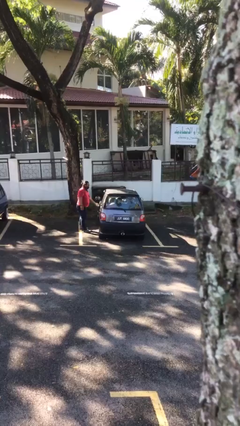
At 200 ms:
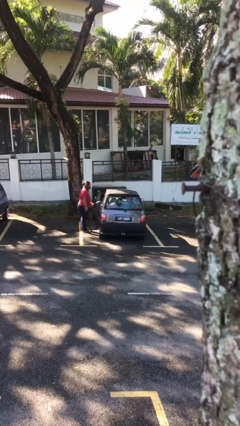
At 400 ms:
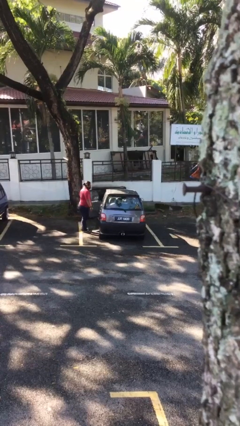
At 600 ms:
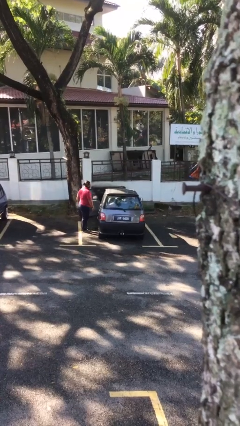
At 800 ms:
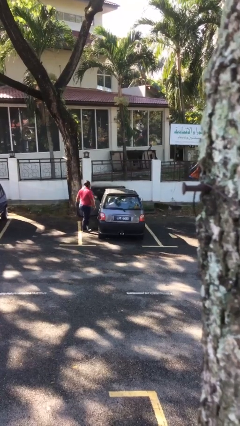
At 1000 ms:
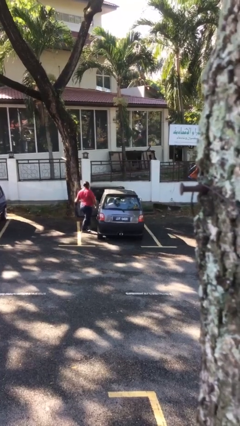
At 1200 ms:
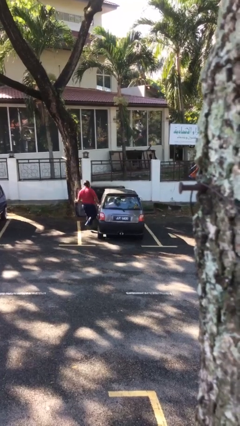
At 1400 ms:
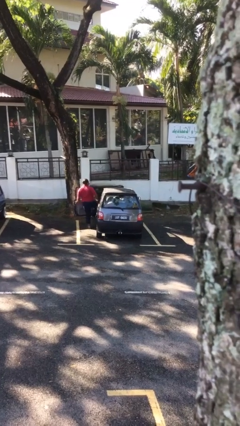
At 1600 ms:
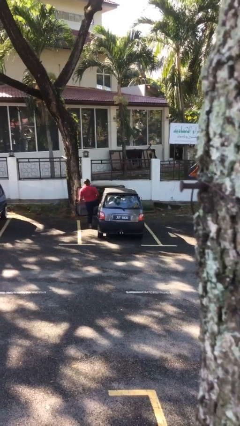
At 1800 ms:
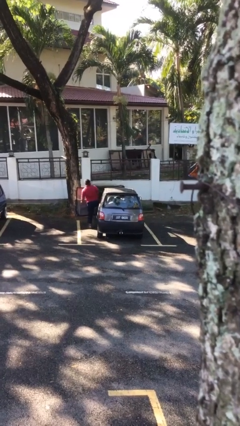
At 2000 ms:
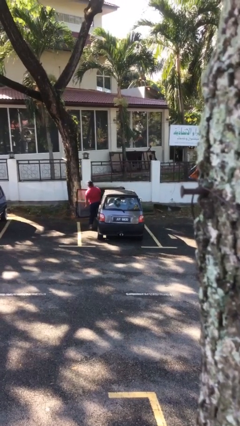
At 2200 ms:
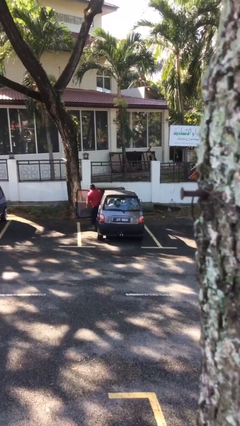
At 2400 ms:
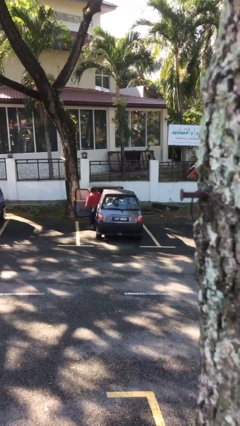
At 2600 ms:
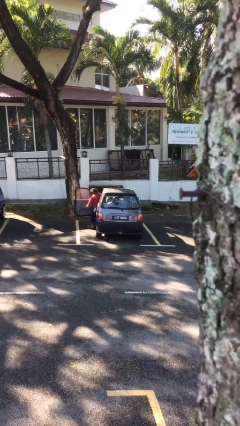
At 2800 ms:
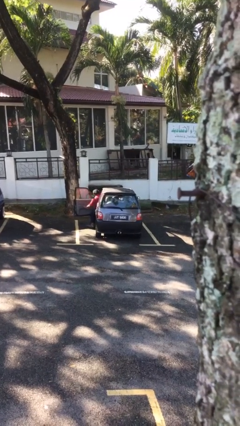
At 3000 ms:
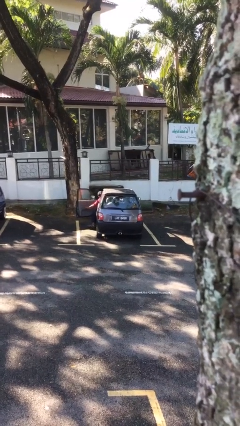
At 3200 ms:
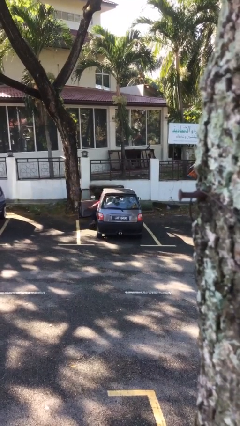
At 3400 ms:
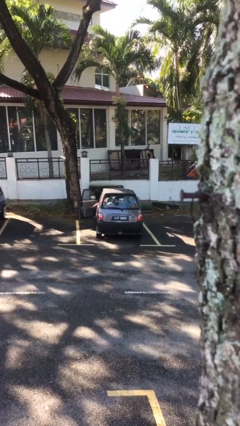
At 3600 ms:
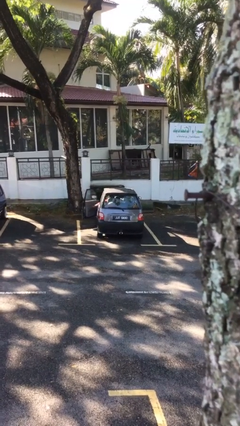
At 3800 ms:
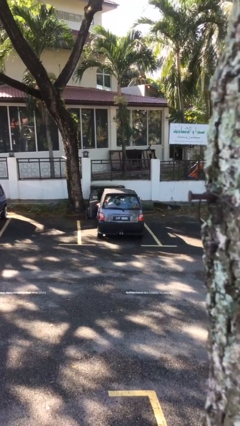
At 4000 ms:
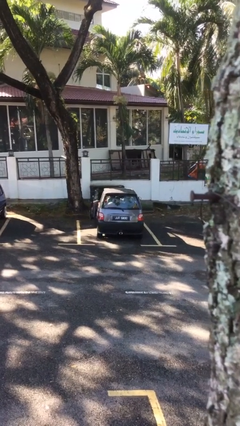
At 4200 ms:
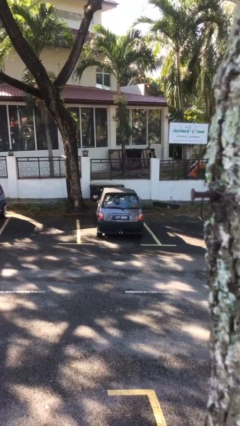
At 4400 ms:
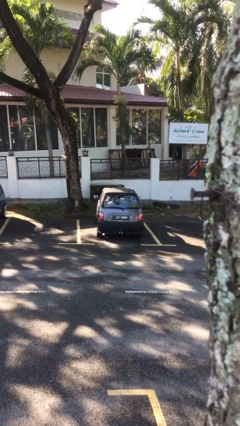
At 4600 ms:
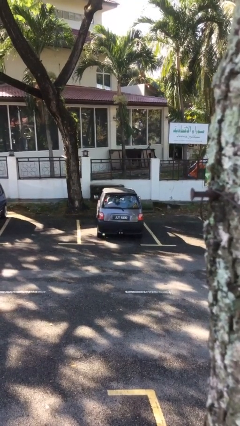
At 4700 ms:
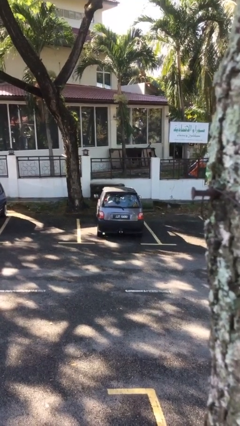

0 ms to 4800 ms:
car picks up person

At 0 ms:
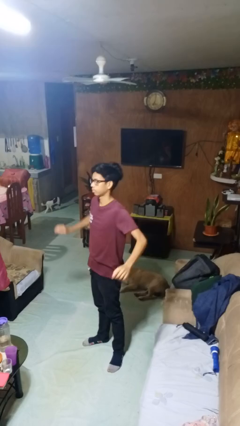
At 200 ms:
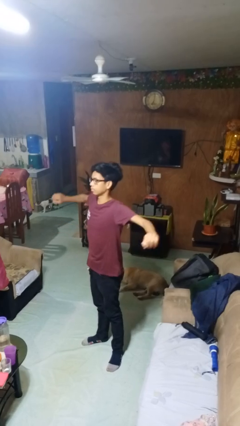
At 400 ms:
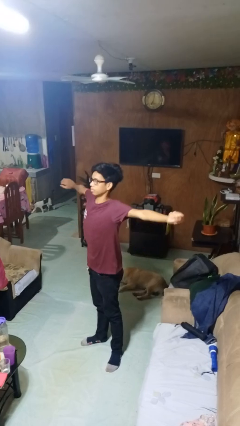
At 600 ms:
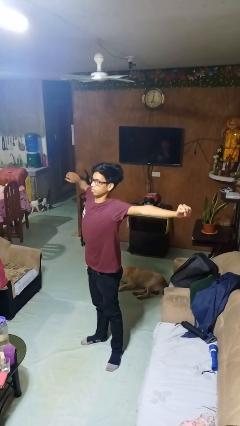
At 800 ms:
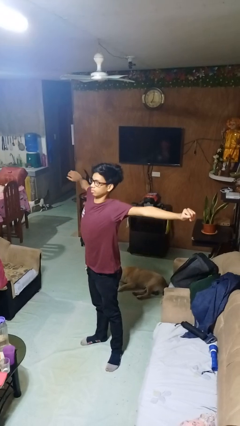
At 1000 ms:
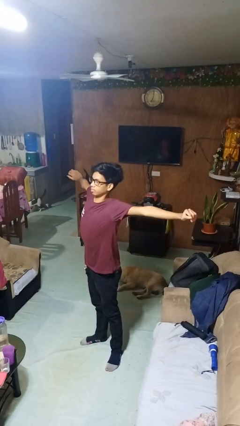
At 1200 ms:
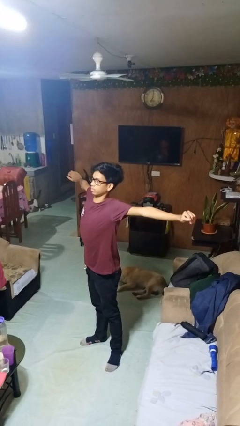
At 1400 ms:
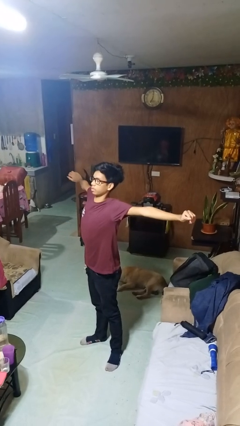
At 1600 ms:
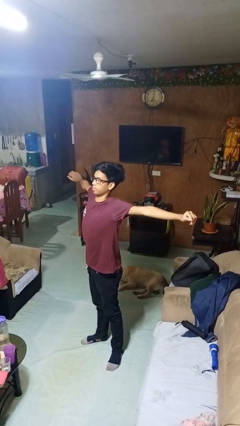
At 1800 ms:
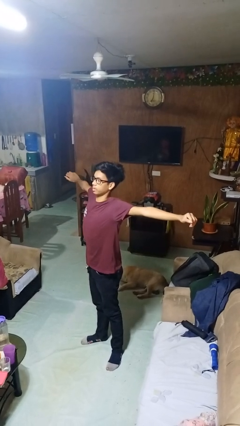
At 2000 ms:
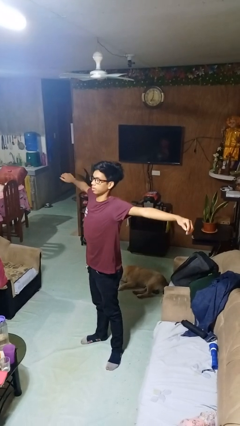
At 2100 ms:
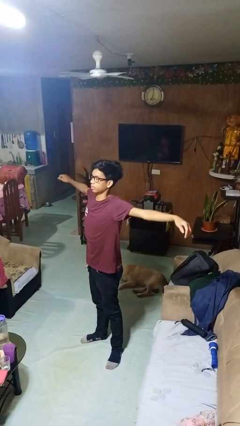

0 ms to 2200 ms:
person stretches arms to side

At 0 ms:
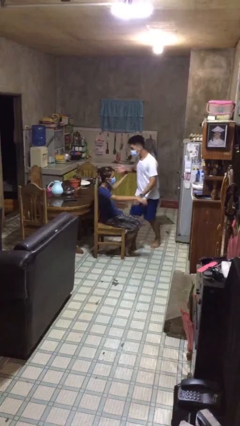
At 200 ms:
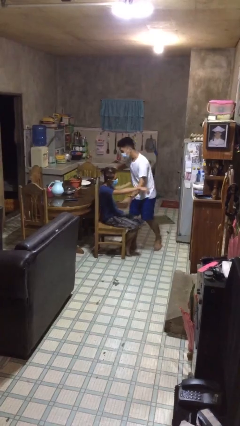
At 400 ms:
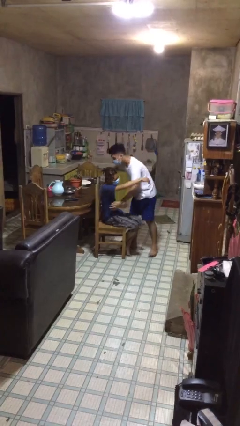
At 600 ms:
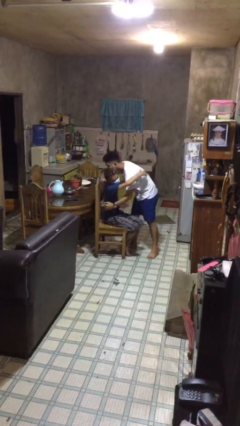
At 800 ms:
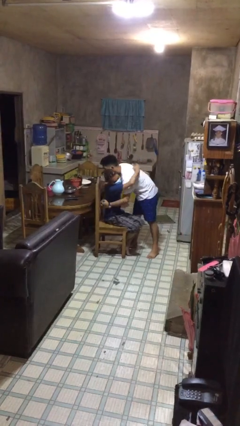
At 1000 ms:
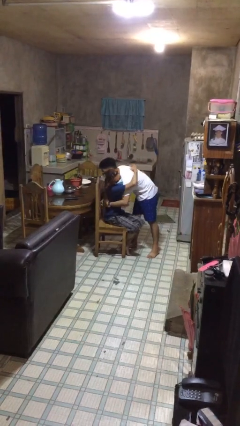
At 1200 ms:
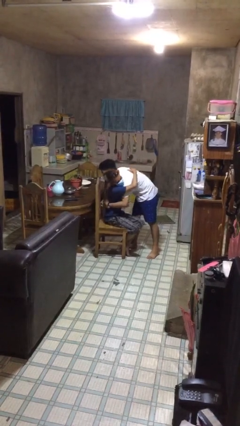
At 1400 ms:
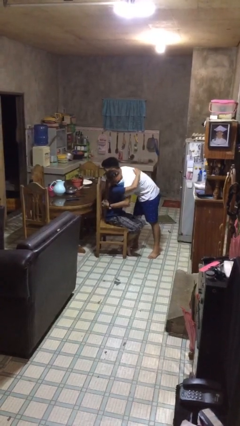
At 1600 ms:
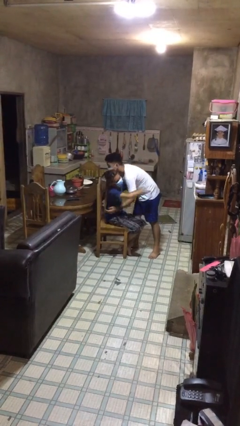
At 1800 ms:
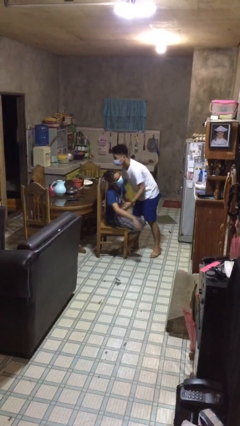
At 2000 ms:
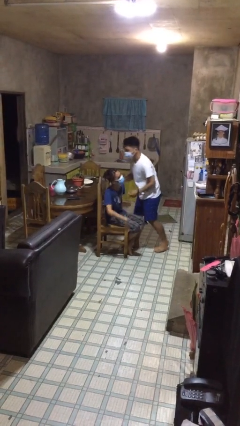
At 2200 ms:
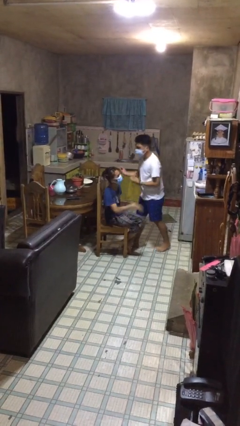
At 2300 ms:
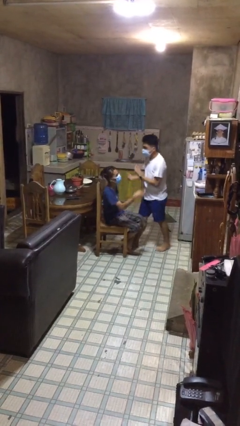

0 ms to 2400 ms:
person embraces person

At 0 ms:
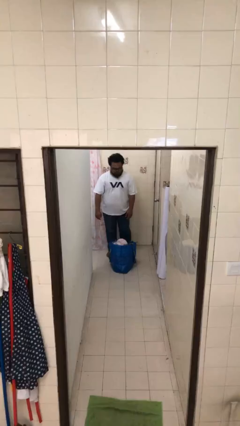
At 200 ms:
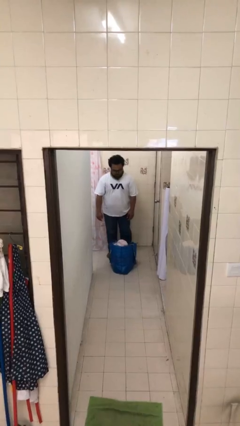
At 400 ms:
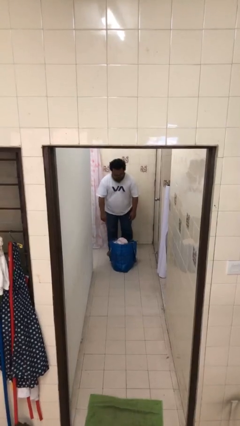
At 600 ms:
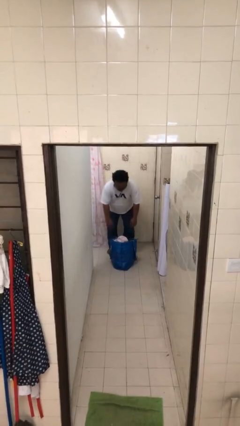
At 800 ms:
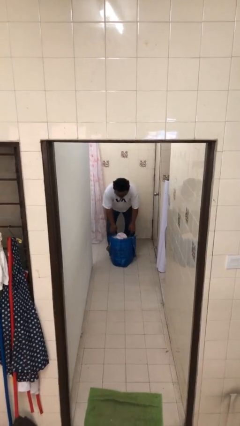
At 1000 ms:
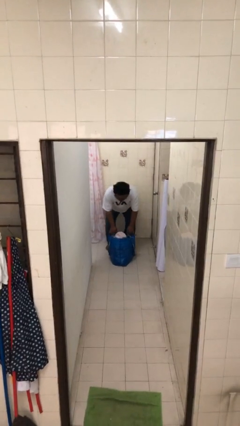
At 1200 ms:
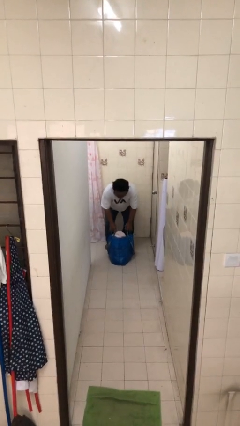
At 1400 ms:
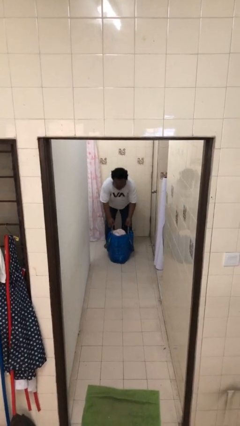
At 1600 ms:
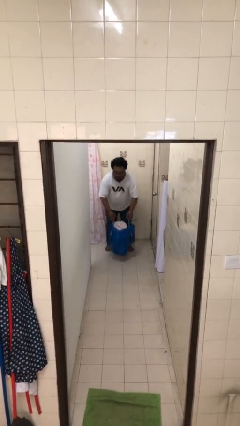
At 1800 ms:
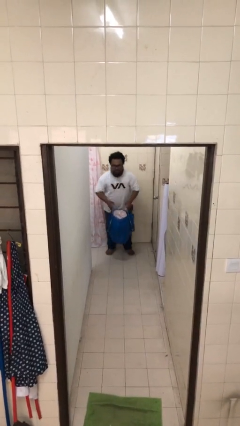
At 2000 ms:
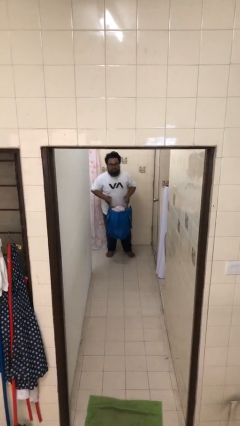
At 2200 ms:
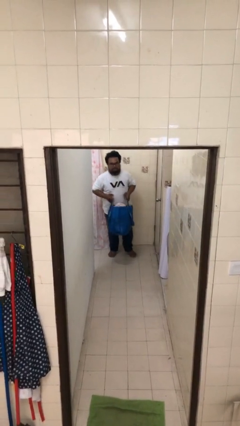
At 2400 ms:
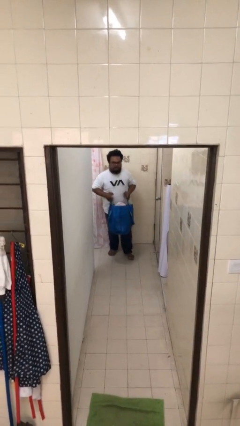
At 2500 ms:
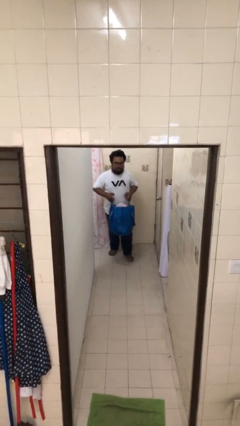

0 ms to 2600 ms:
person picks up object from floor

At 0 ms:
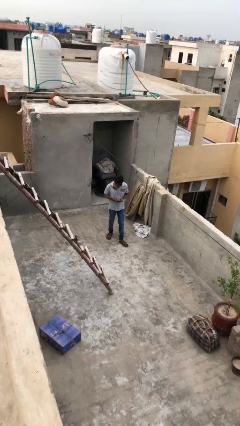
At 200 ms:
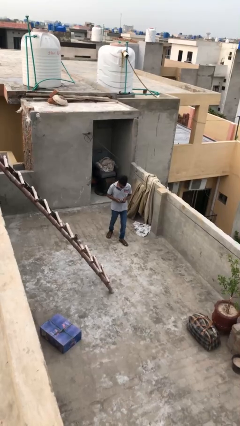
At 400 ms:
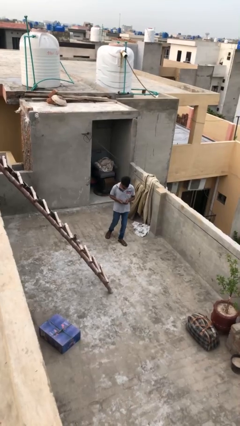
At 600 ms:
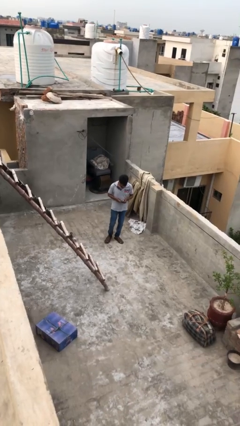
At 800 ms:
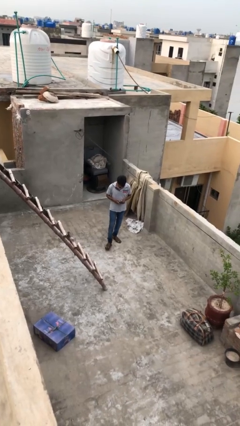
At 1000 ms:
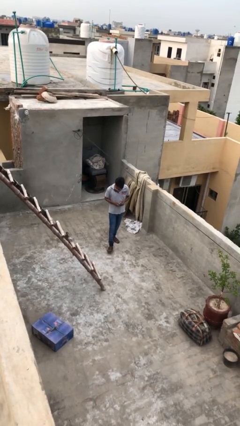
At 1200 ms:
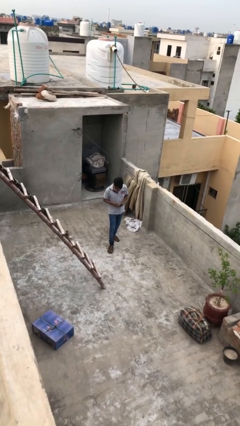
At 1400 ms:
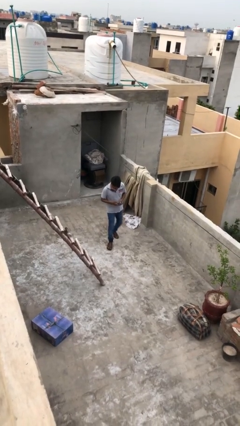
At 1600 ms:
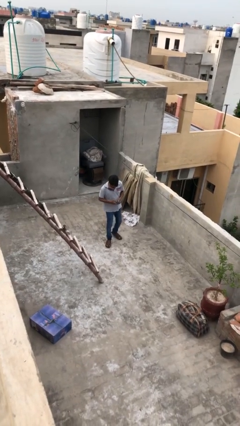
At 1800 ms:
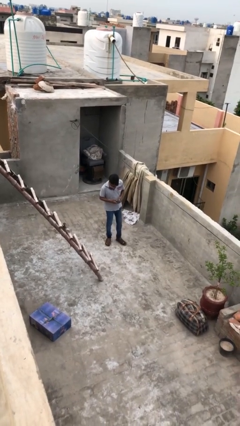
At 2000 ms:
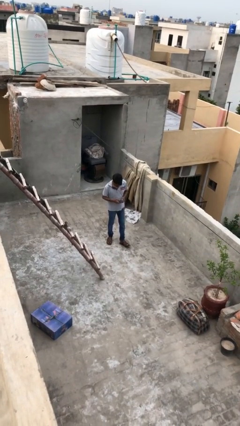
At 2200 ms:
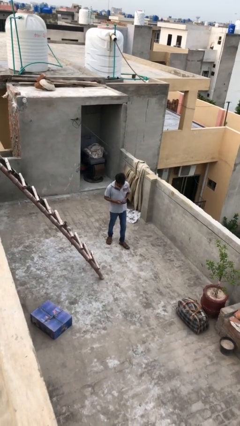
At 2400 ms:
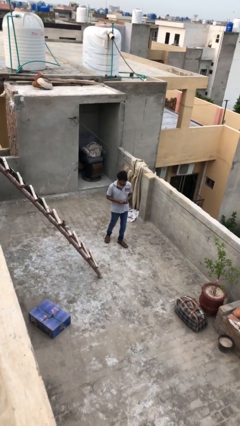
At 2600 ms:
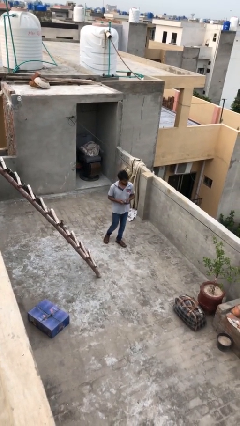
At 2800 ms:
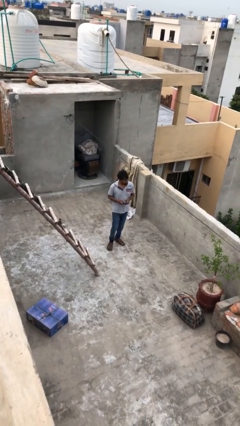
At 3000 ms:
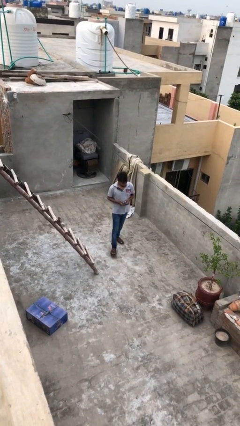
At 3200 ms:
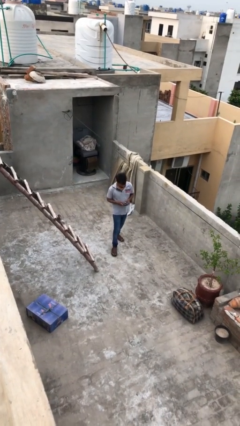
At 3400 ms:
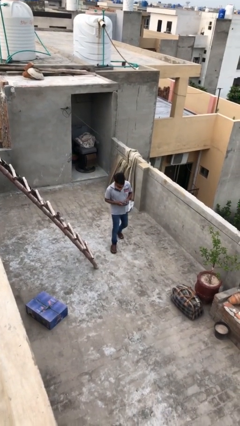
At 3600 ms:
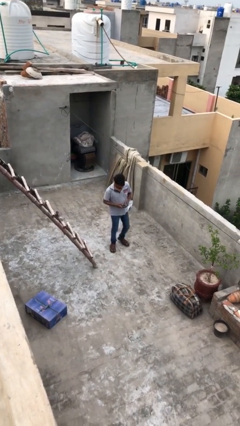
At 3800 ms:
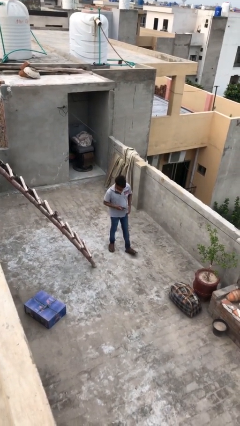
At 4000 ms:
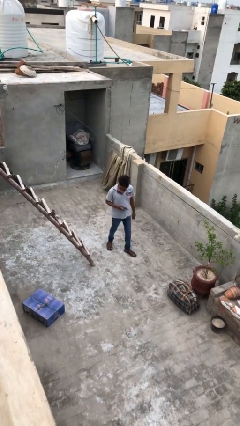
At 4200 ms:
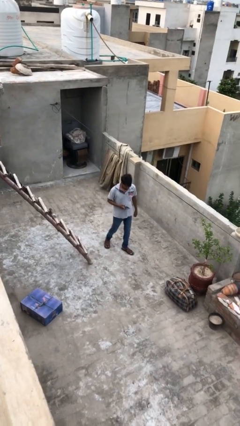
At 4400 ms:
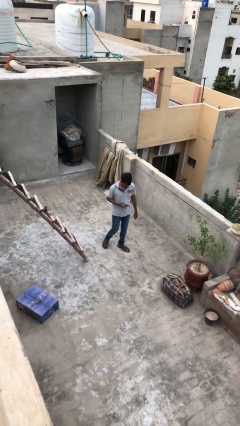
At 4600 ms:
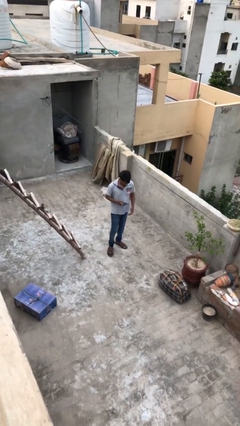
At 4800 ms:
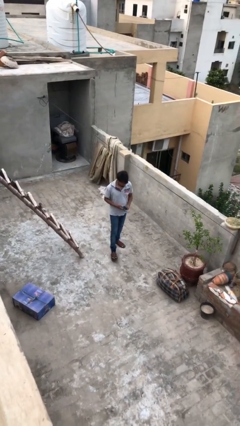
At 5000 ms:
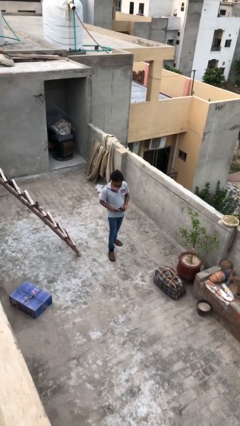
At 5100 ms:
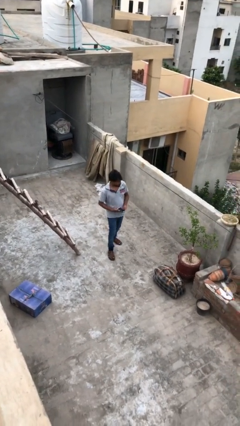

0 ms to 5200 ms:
person texts on phone

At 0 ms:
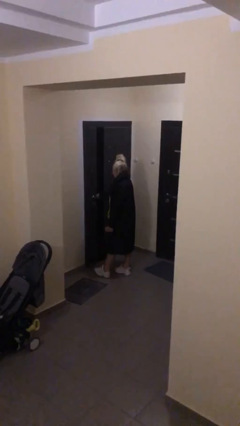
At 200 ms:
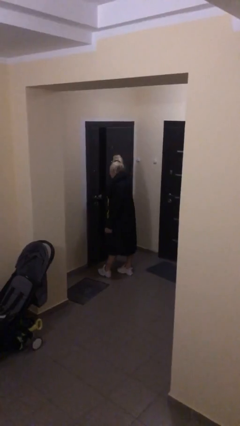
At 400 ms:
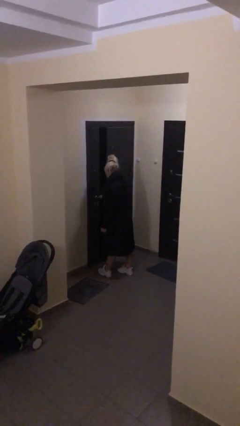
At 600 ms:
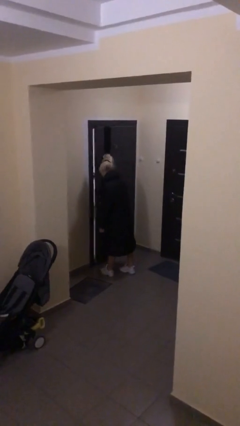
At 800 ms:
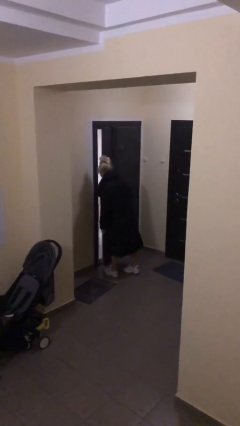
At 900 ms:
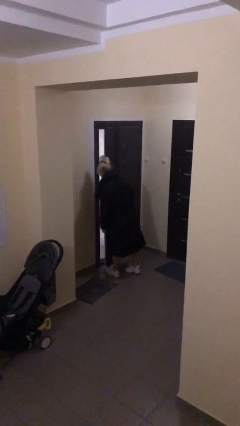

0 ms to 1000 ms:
person opens facility door
